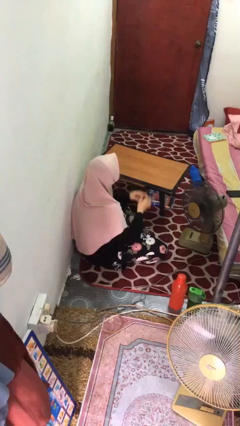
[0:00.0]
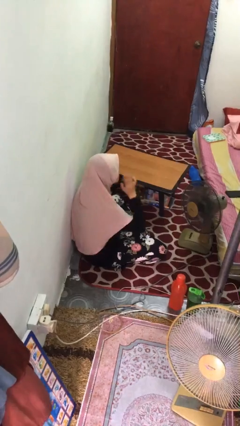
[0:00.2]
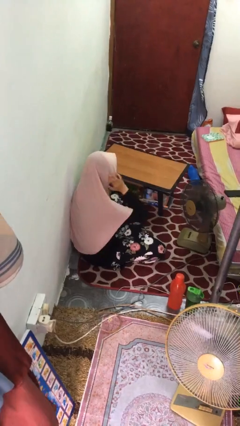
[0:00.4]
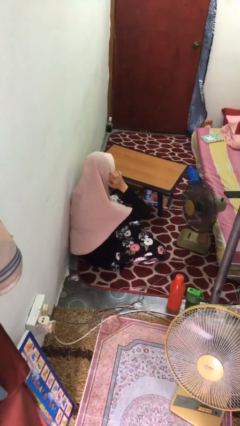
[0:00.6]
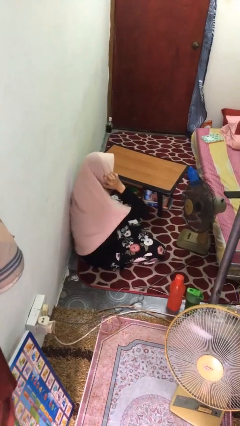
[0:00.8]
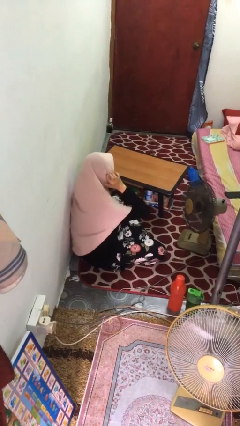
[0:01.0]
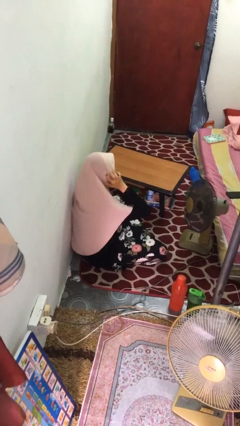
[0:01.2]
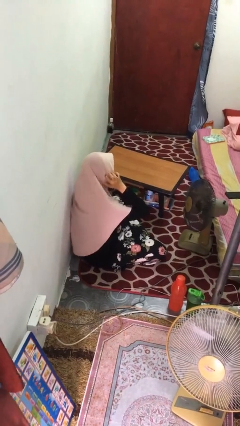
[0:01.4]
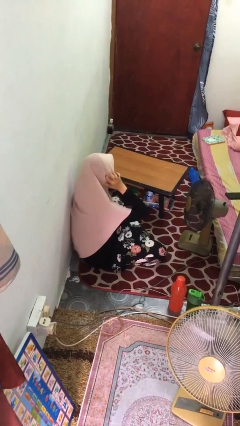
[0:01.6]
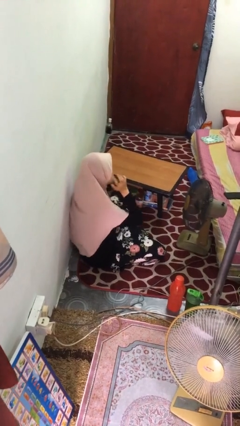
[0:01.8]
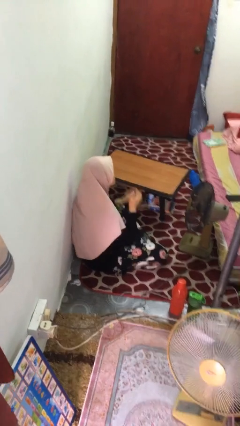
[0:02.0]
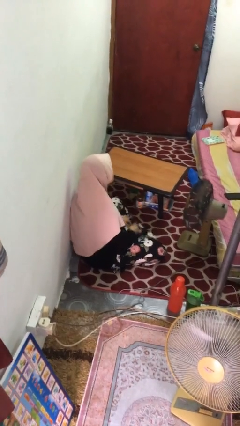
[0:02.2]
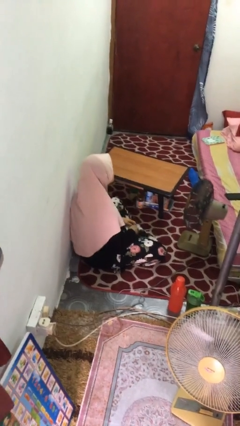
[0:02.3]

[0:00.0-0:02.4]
person puts fingers in ear

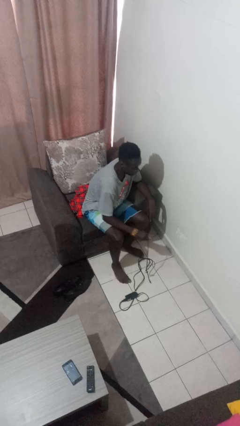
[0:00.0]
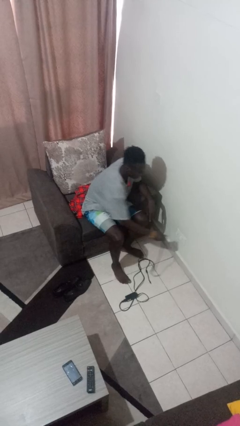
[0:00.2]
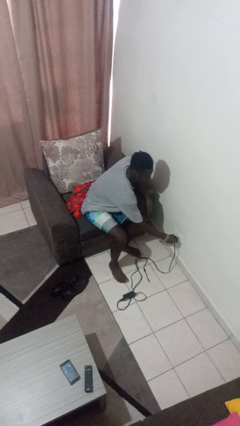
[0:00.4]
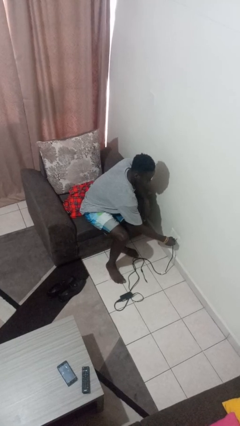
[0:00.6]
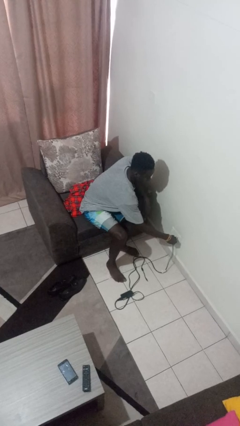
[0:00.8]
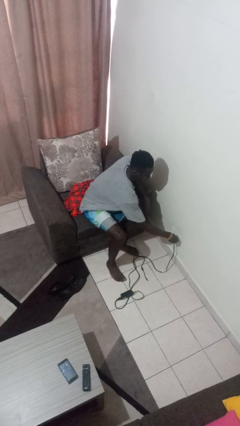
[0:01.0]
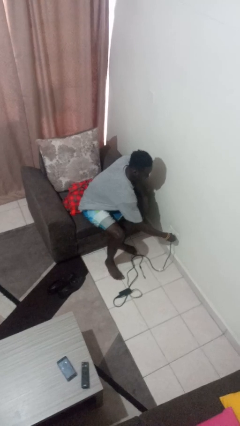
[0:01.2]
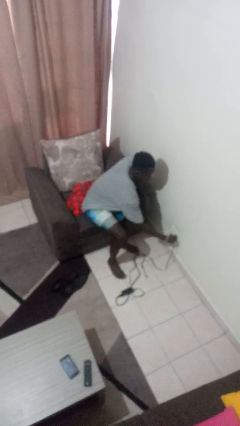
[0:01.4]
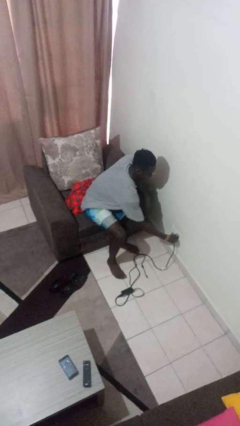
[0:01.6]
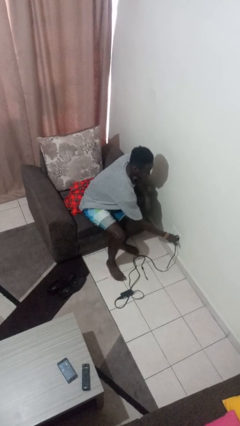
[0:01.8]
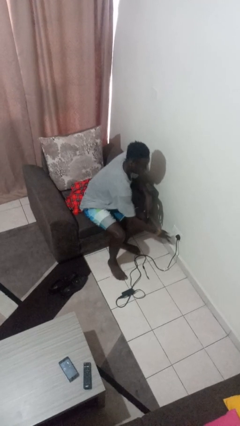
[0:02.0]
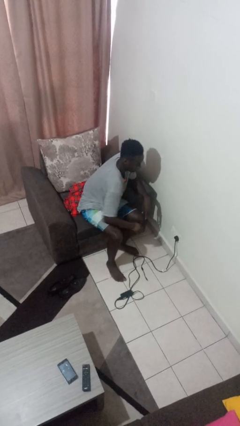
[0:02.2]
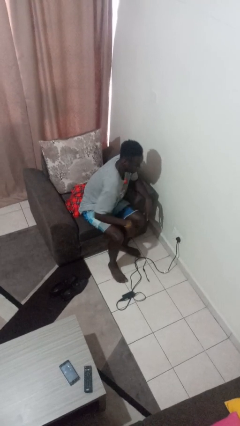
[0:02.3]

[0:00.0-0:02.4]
person plugs into electrical socket

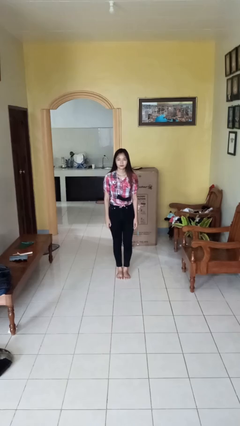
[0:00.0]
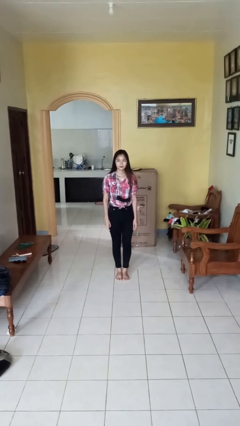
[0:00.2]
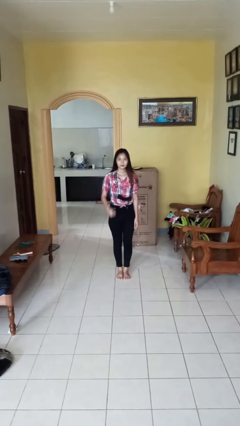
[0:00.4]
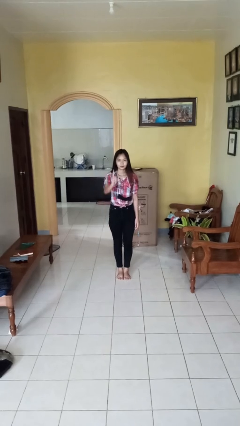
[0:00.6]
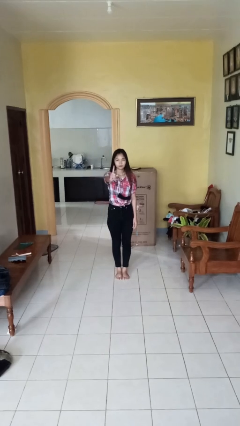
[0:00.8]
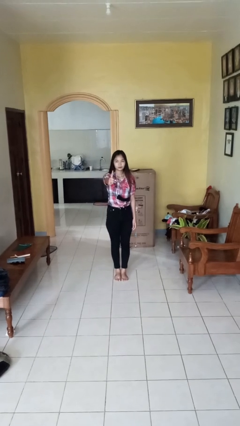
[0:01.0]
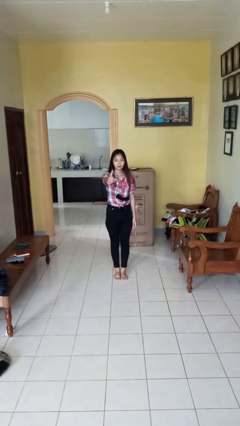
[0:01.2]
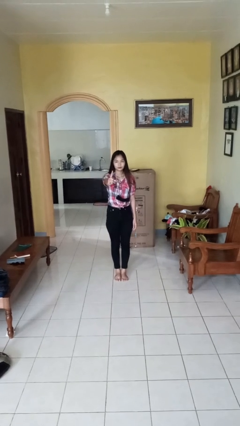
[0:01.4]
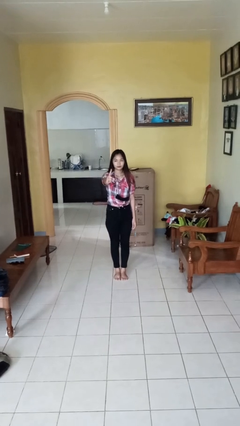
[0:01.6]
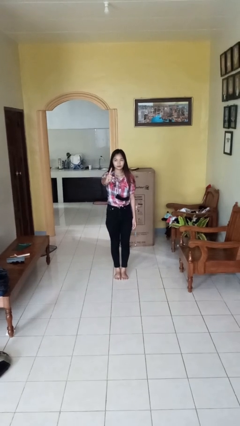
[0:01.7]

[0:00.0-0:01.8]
person gestures number one

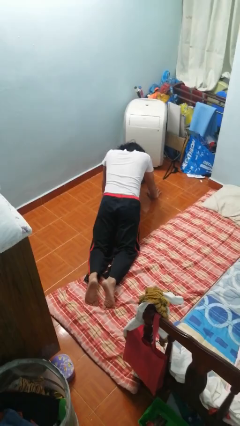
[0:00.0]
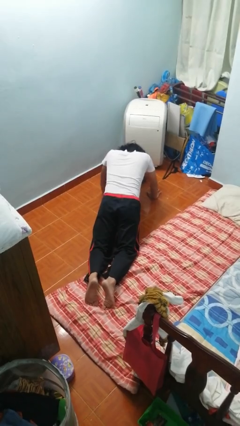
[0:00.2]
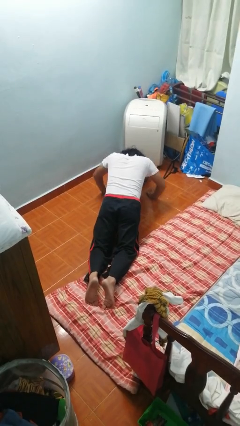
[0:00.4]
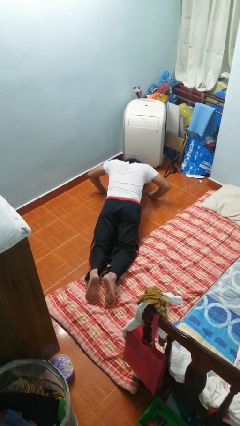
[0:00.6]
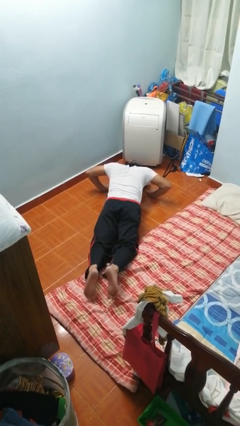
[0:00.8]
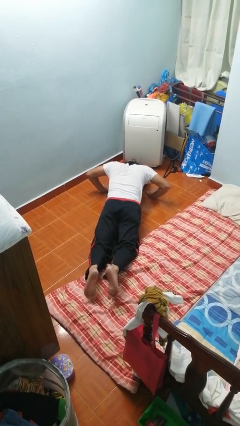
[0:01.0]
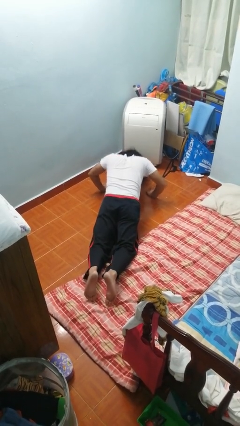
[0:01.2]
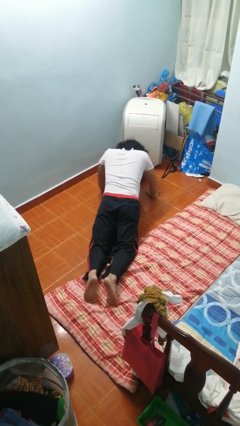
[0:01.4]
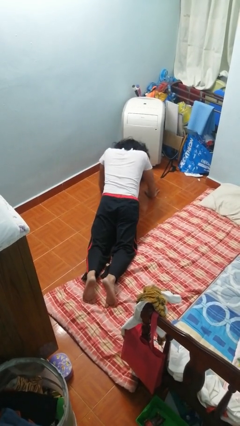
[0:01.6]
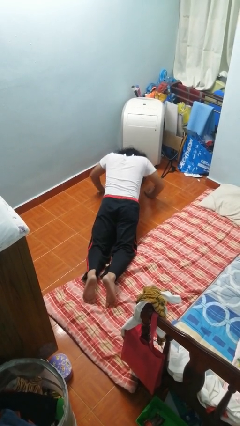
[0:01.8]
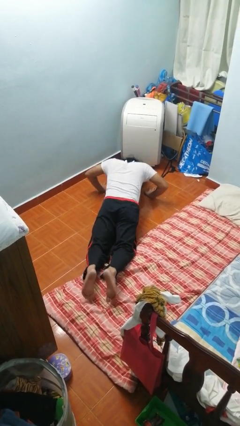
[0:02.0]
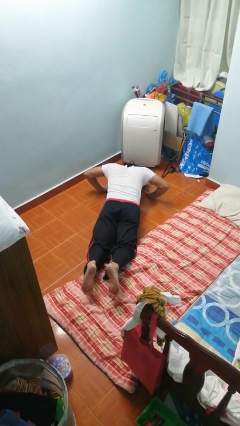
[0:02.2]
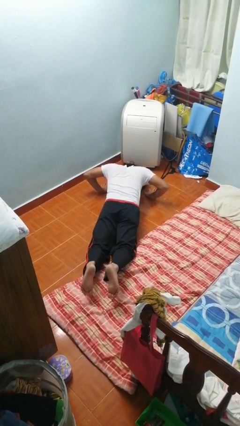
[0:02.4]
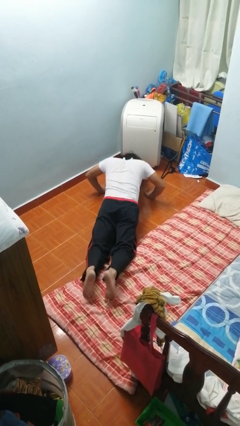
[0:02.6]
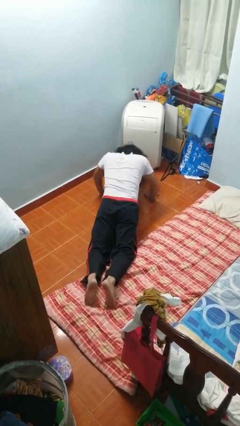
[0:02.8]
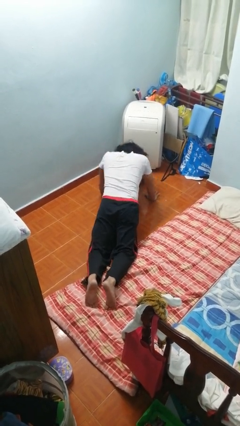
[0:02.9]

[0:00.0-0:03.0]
person exercises with pushup

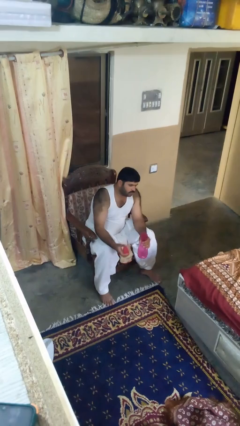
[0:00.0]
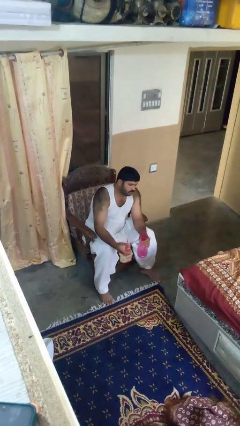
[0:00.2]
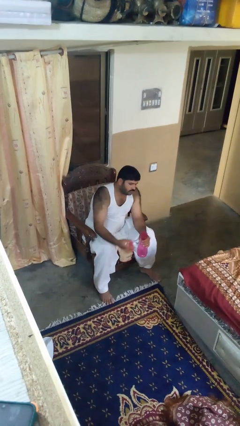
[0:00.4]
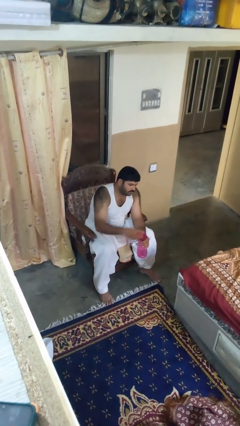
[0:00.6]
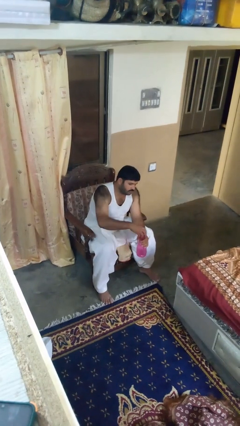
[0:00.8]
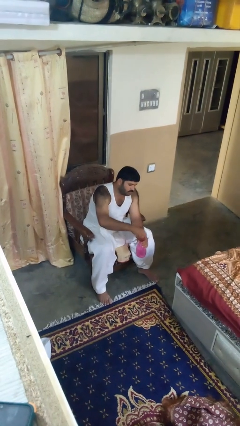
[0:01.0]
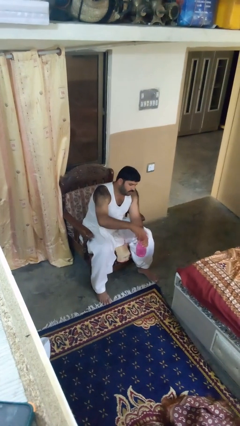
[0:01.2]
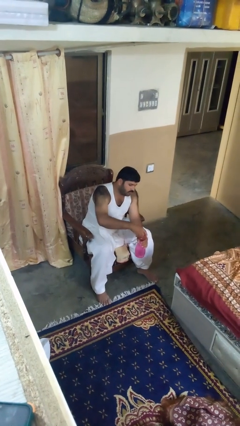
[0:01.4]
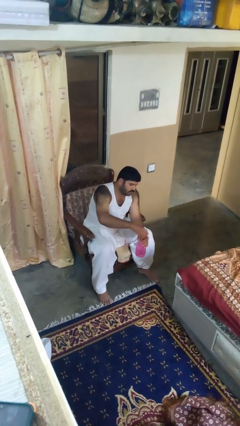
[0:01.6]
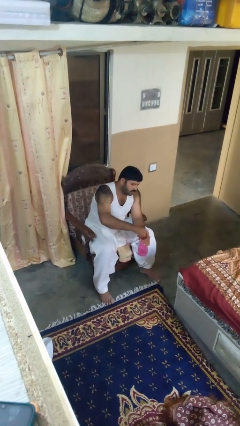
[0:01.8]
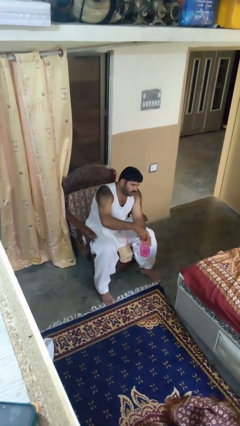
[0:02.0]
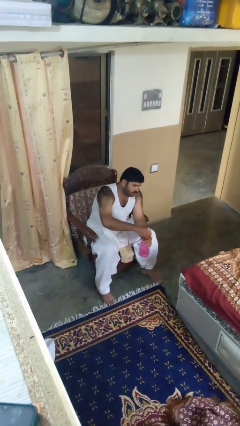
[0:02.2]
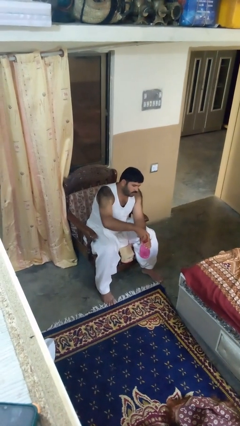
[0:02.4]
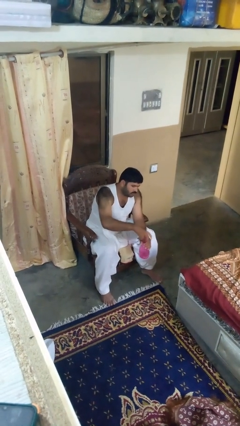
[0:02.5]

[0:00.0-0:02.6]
person screws lid to bottle

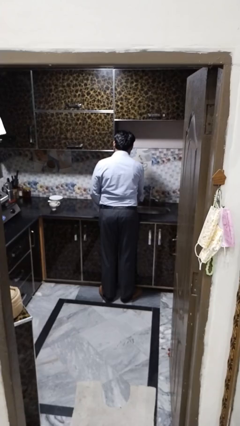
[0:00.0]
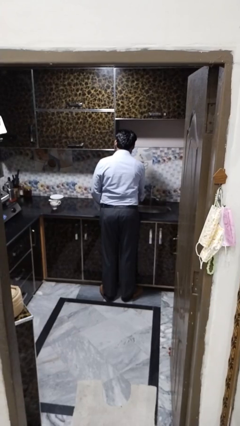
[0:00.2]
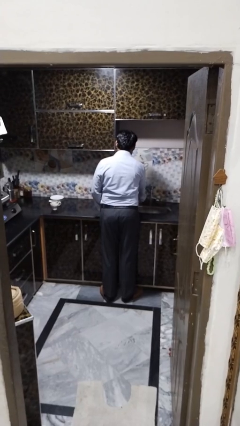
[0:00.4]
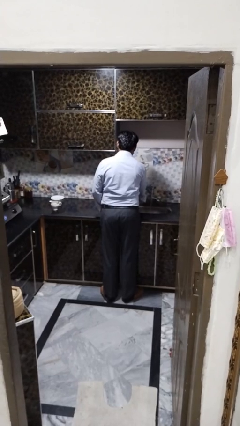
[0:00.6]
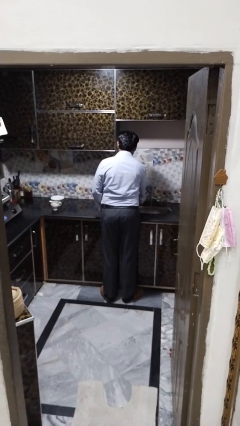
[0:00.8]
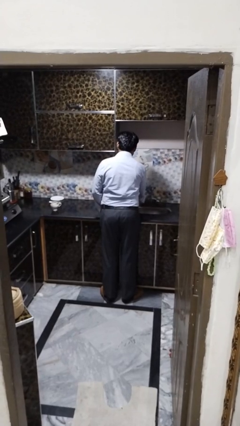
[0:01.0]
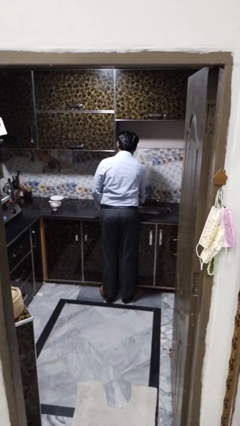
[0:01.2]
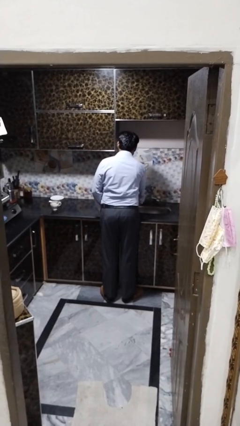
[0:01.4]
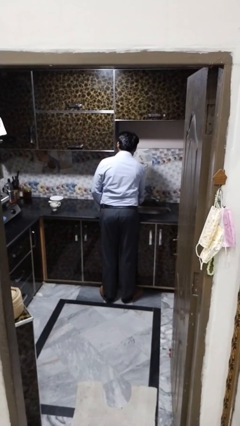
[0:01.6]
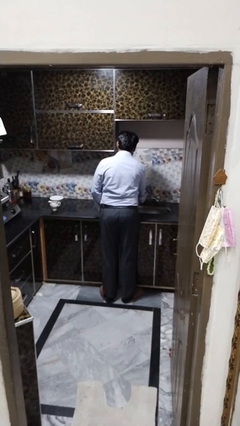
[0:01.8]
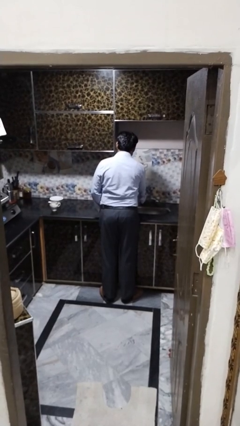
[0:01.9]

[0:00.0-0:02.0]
person turns off faucet

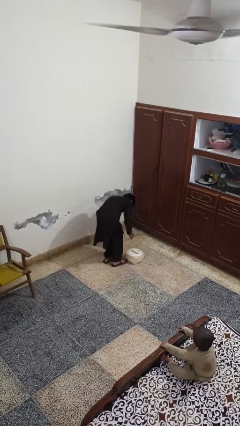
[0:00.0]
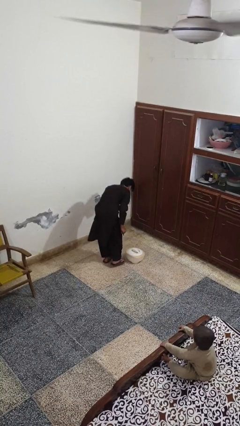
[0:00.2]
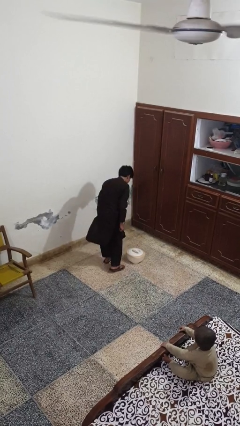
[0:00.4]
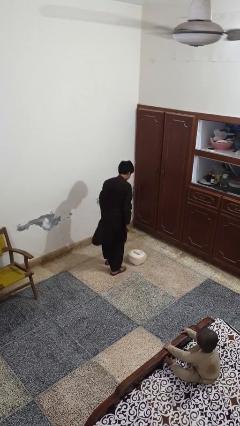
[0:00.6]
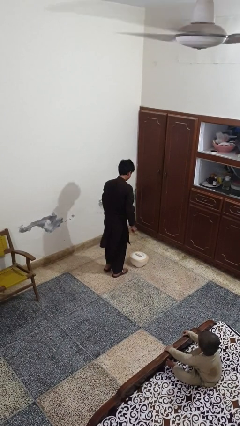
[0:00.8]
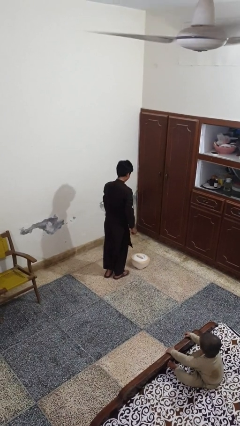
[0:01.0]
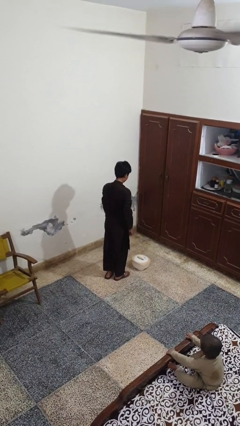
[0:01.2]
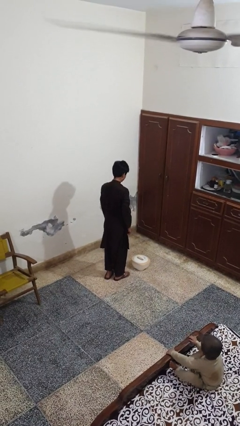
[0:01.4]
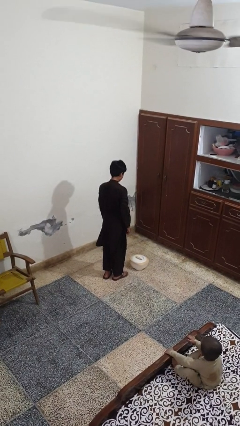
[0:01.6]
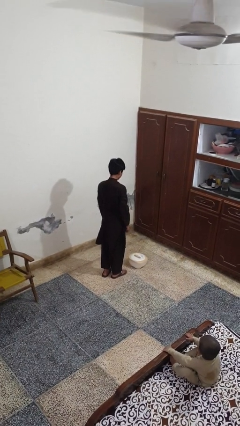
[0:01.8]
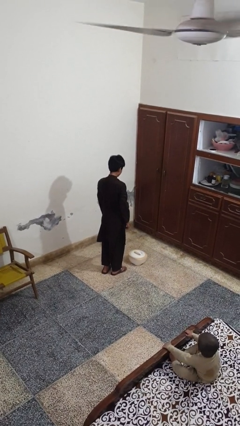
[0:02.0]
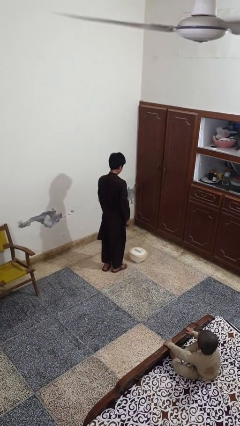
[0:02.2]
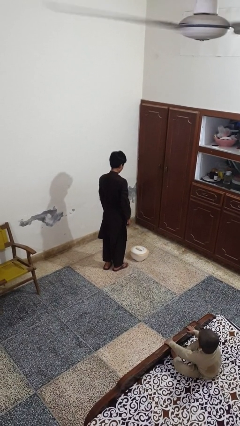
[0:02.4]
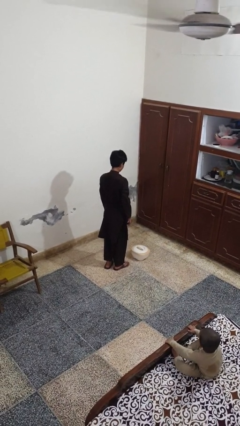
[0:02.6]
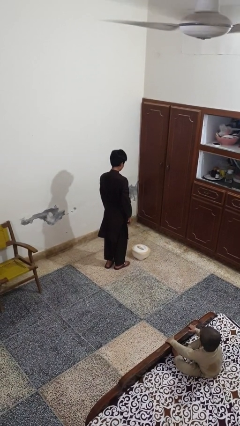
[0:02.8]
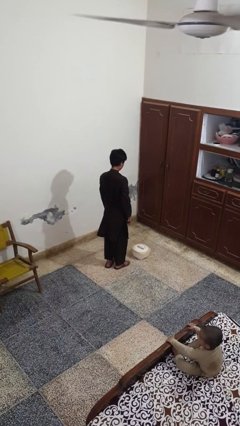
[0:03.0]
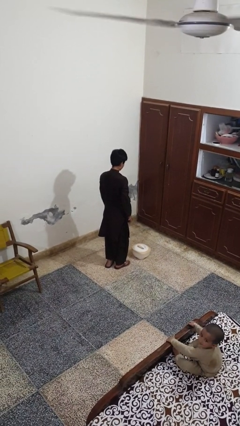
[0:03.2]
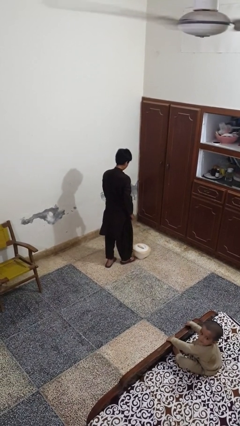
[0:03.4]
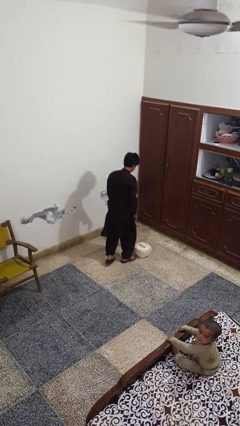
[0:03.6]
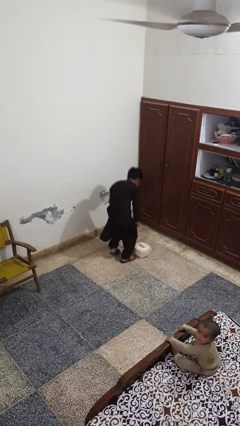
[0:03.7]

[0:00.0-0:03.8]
person stands up from floor
